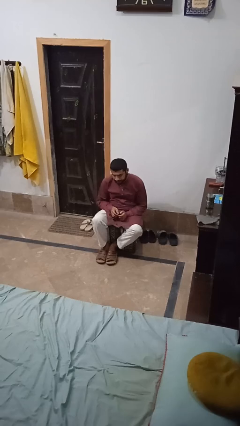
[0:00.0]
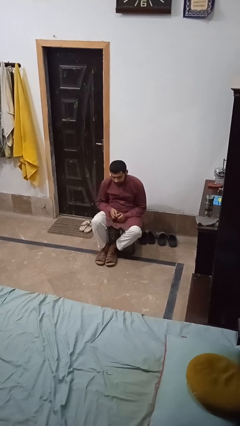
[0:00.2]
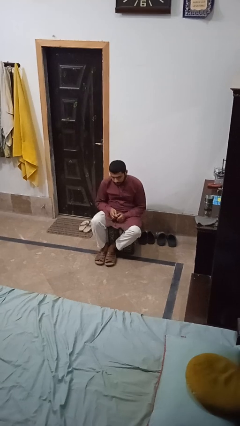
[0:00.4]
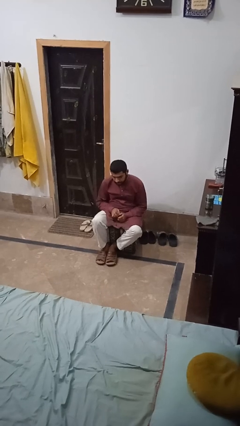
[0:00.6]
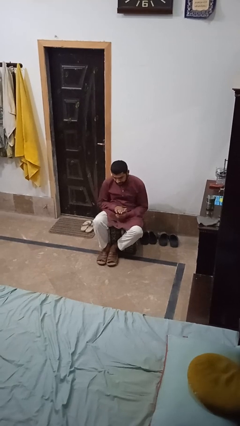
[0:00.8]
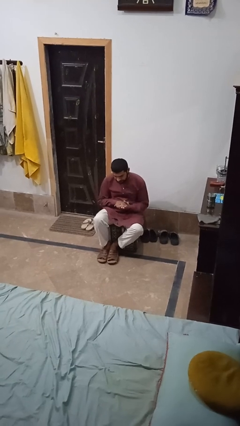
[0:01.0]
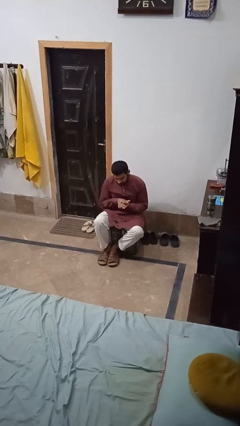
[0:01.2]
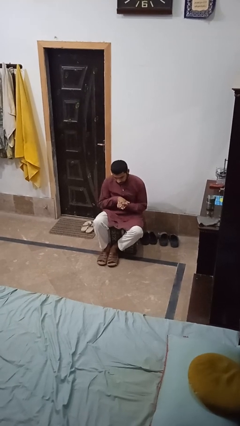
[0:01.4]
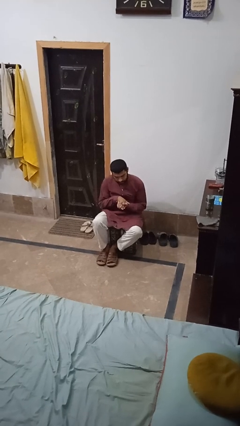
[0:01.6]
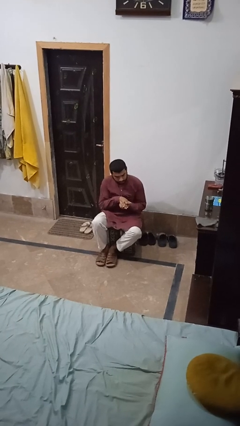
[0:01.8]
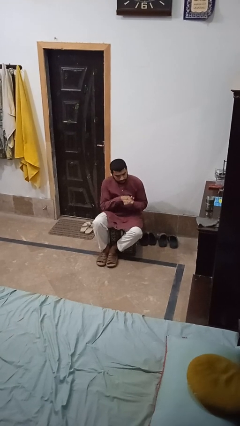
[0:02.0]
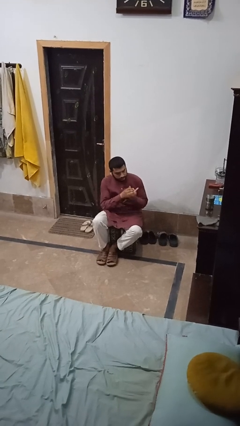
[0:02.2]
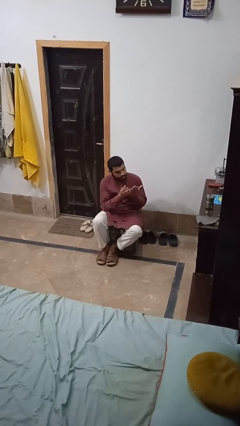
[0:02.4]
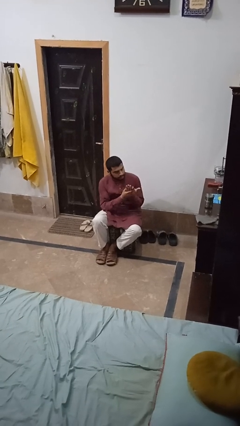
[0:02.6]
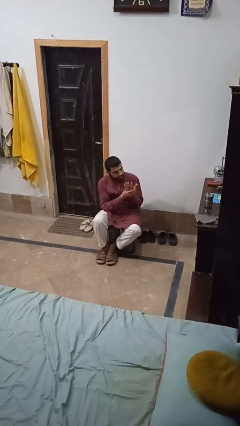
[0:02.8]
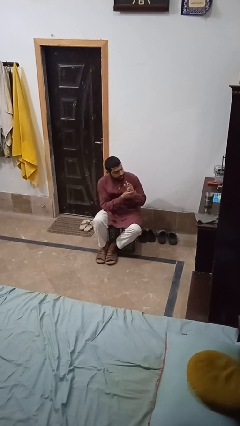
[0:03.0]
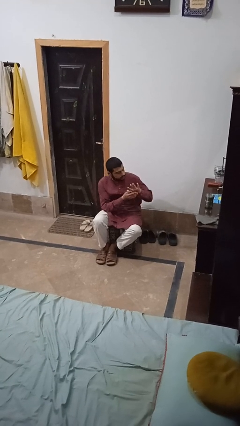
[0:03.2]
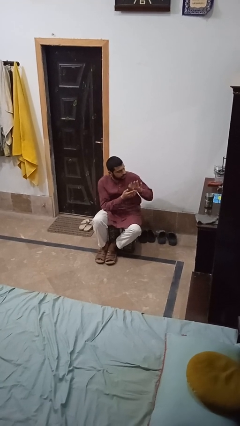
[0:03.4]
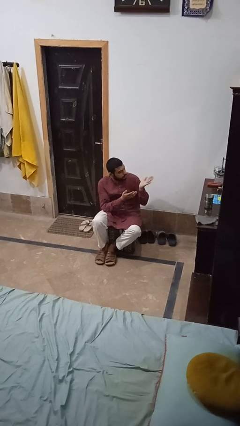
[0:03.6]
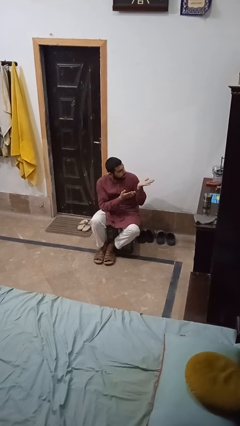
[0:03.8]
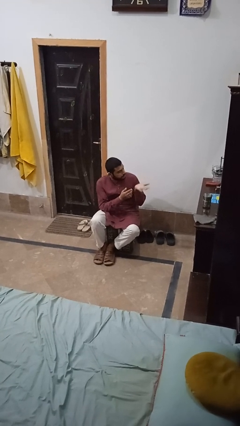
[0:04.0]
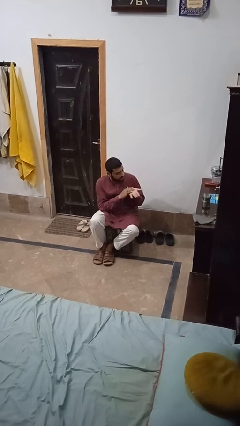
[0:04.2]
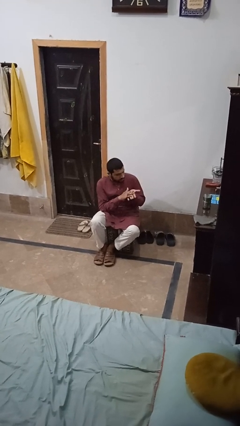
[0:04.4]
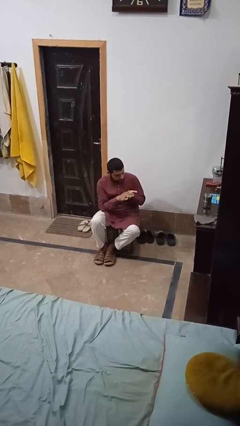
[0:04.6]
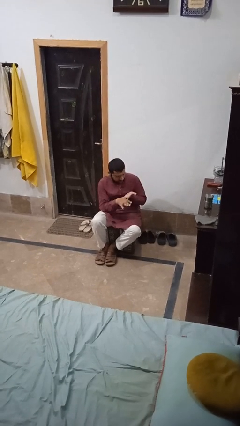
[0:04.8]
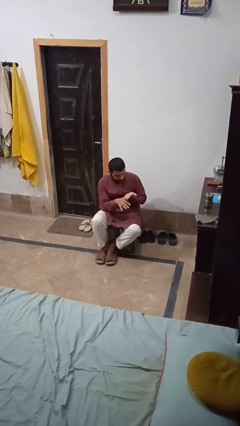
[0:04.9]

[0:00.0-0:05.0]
person looks at hands in lap

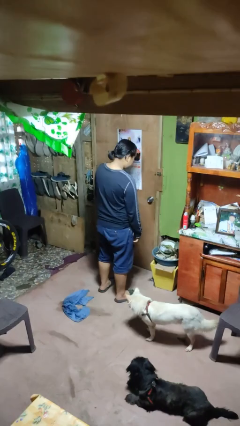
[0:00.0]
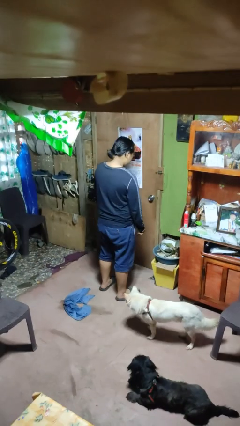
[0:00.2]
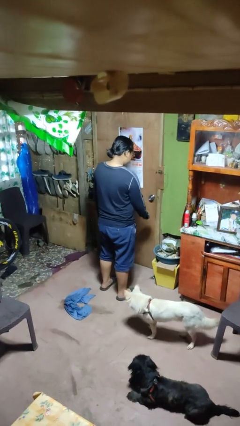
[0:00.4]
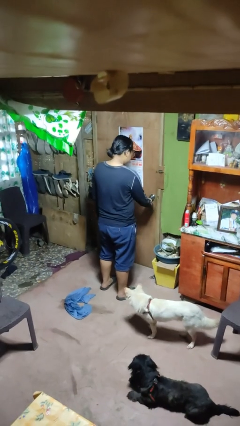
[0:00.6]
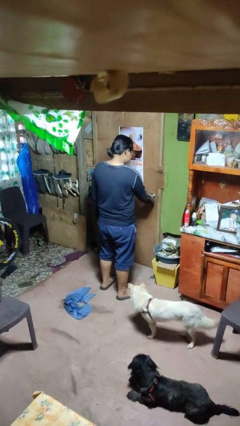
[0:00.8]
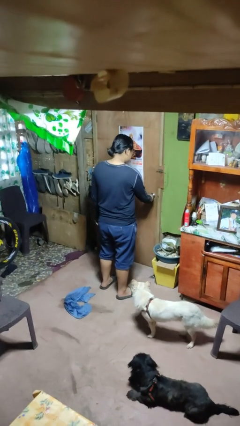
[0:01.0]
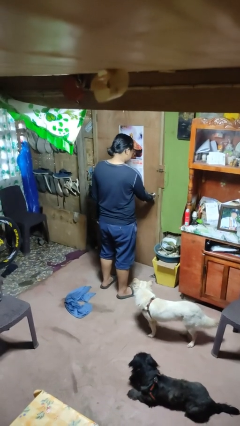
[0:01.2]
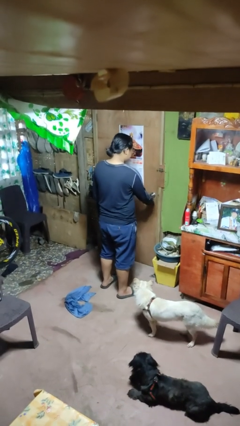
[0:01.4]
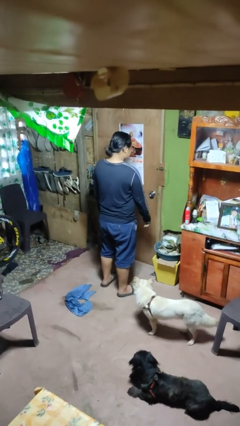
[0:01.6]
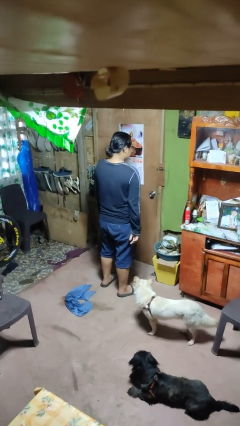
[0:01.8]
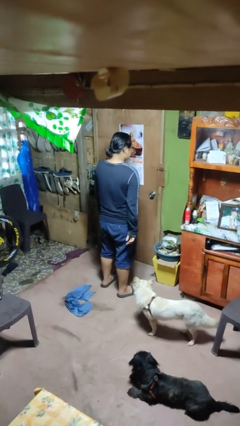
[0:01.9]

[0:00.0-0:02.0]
person unlocks door with keys

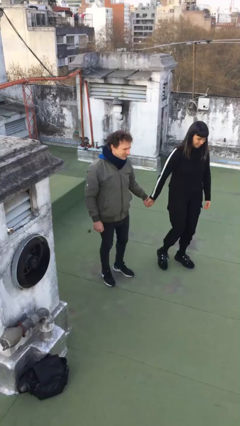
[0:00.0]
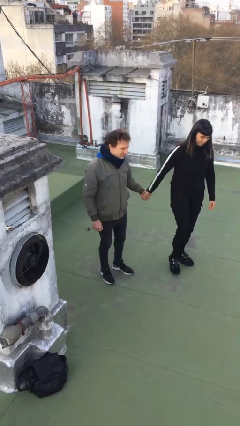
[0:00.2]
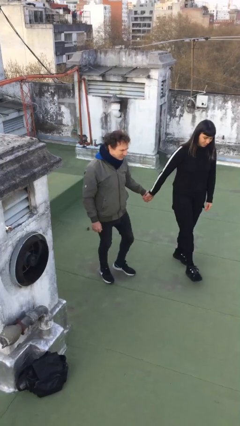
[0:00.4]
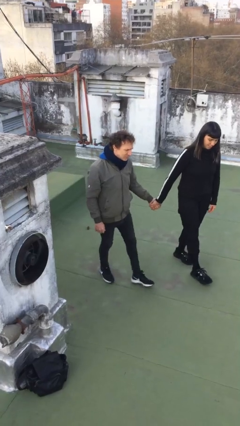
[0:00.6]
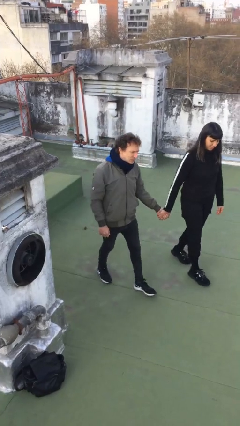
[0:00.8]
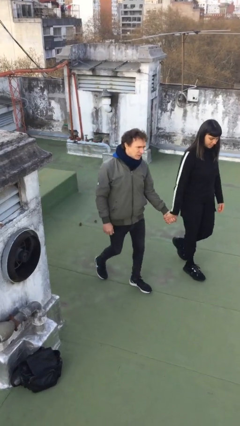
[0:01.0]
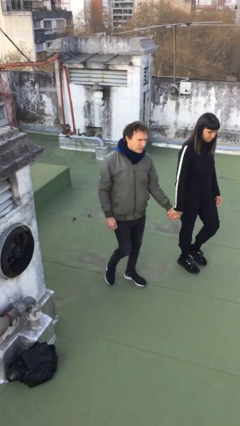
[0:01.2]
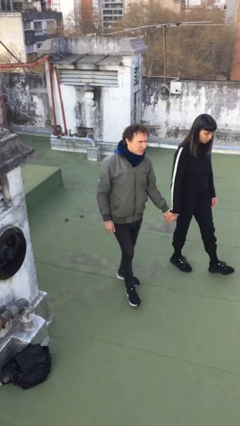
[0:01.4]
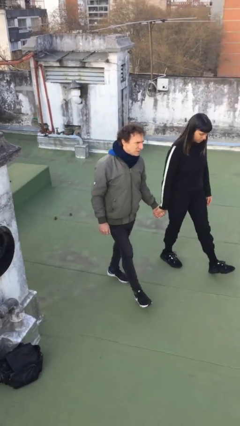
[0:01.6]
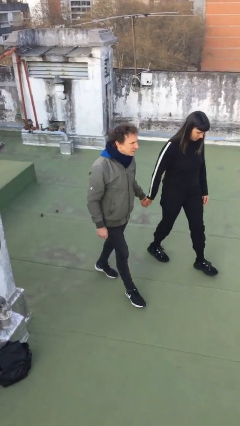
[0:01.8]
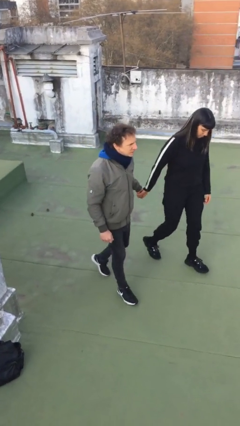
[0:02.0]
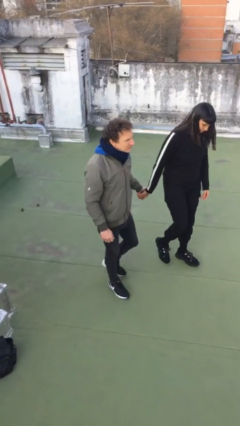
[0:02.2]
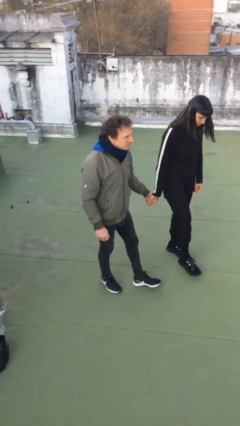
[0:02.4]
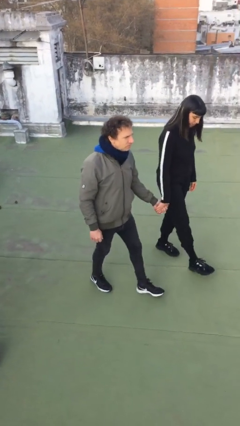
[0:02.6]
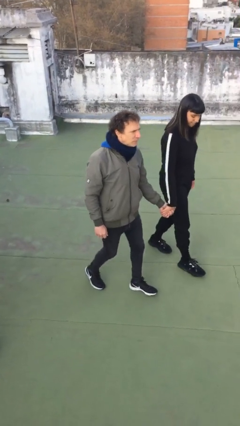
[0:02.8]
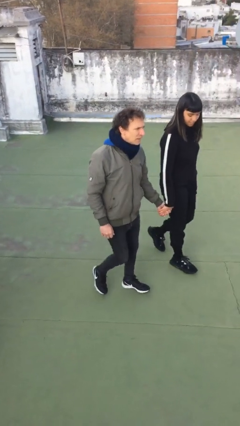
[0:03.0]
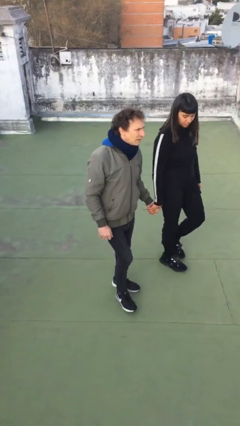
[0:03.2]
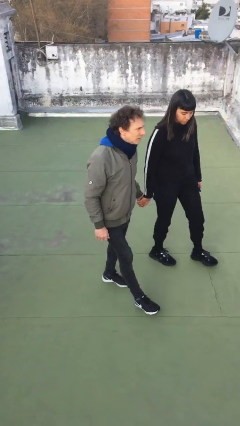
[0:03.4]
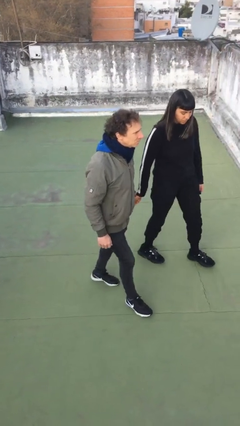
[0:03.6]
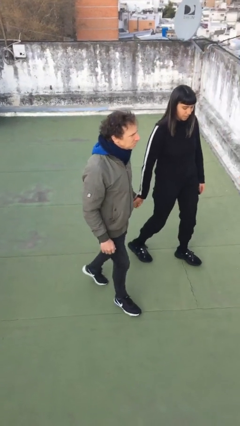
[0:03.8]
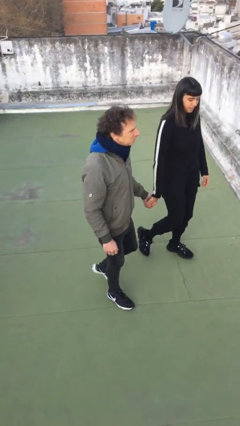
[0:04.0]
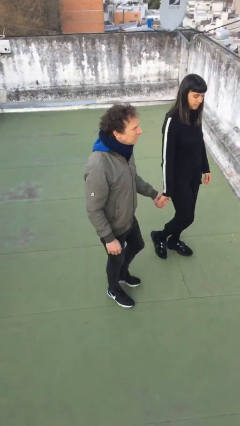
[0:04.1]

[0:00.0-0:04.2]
person holds hand

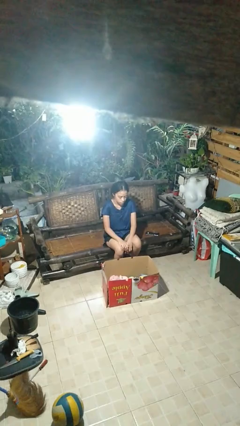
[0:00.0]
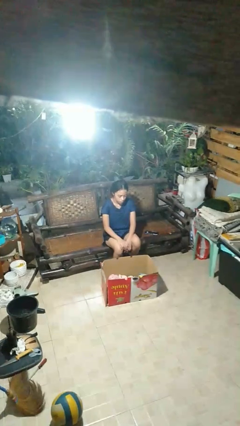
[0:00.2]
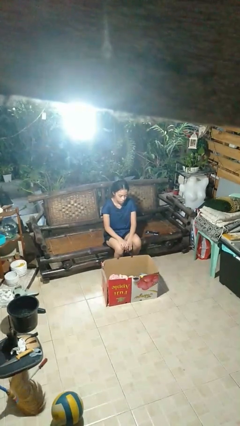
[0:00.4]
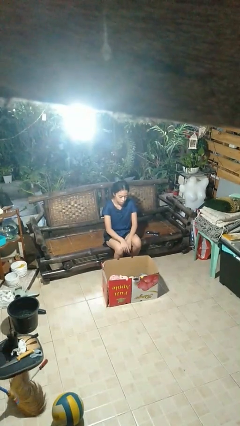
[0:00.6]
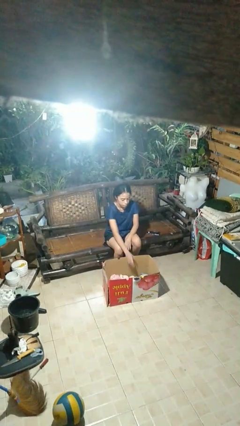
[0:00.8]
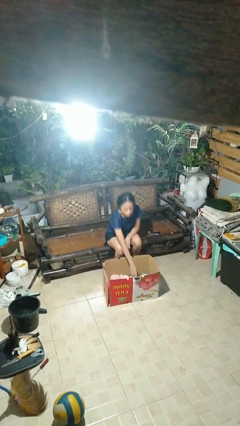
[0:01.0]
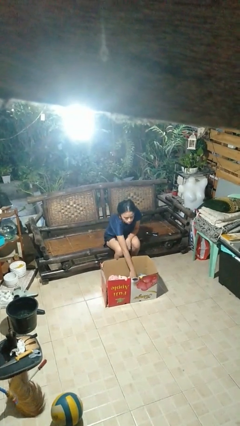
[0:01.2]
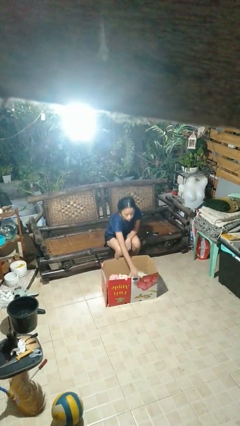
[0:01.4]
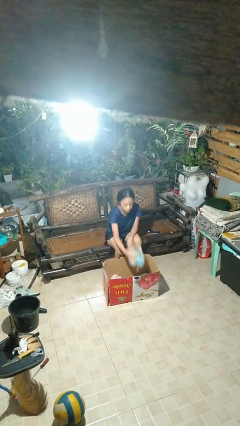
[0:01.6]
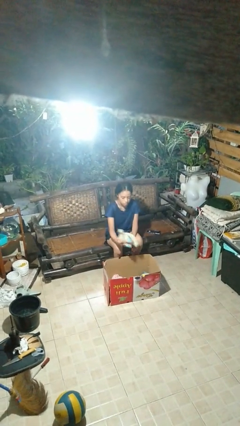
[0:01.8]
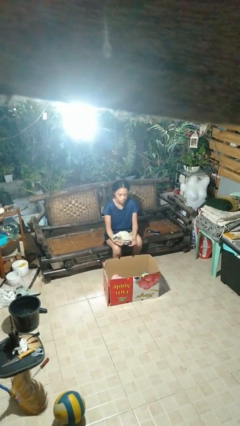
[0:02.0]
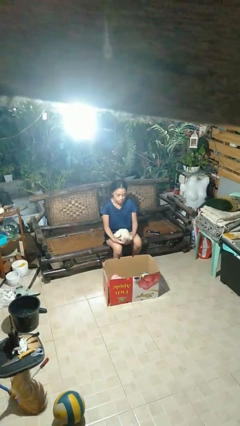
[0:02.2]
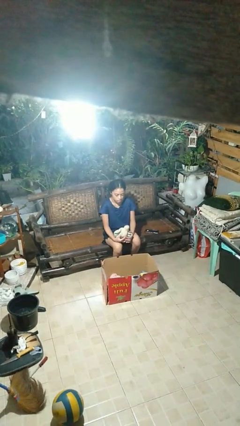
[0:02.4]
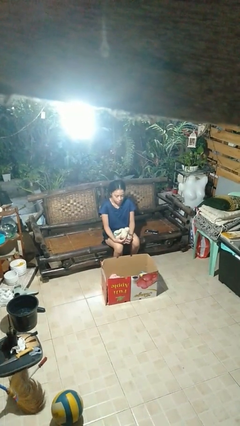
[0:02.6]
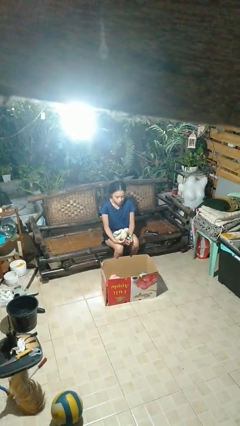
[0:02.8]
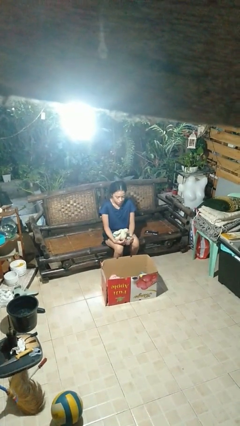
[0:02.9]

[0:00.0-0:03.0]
person takes object from box

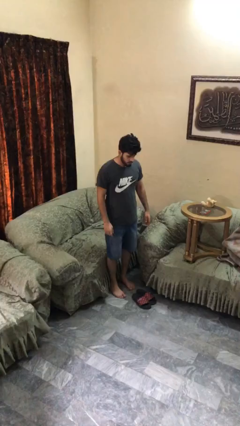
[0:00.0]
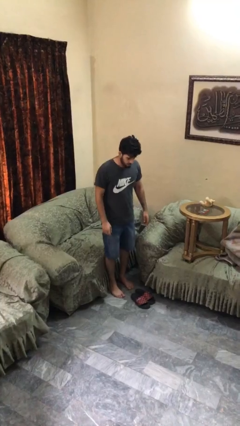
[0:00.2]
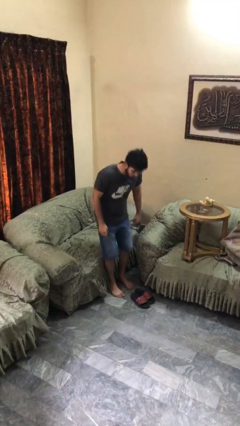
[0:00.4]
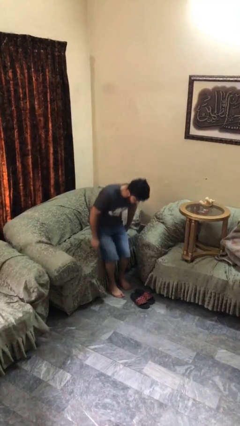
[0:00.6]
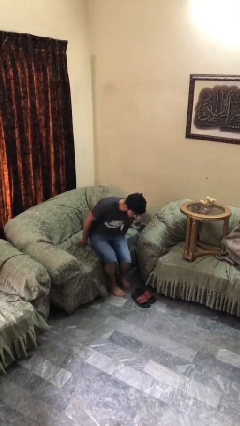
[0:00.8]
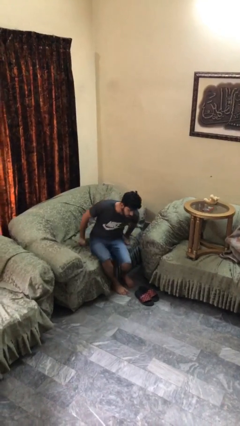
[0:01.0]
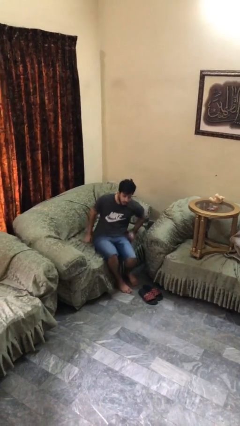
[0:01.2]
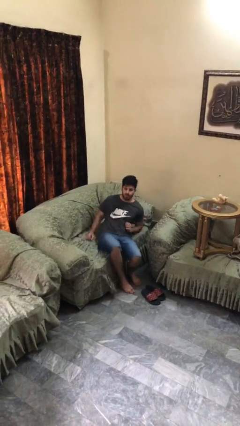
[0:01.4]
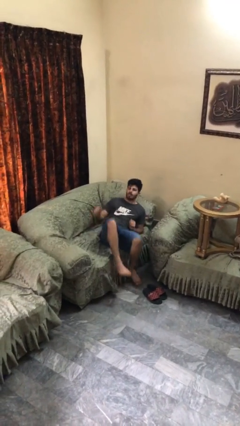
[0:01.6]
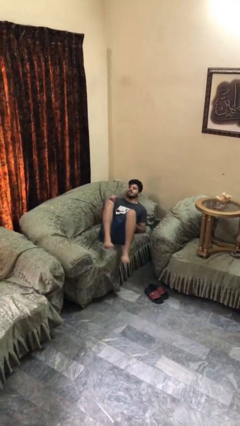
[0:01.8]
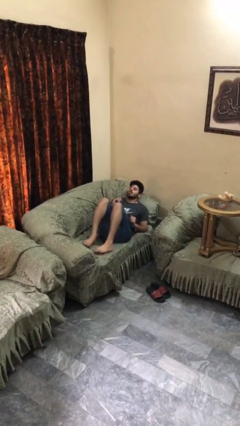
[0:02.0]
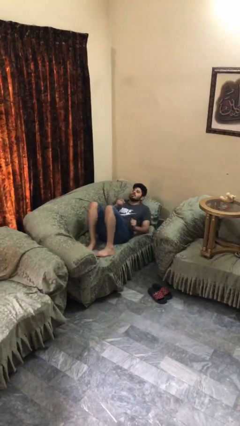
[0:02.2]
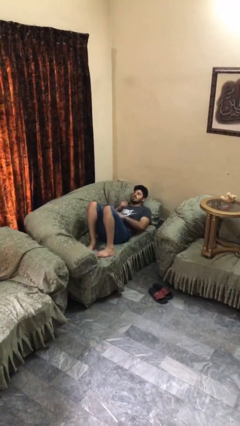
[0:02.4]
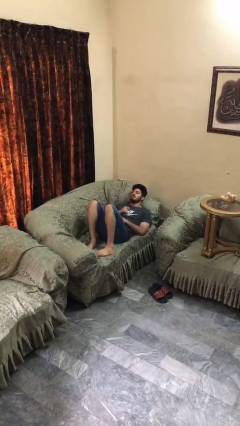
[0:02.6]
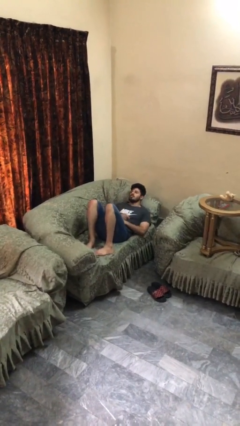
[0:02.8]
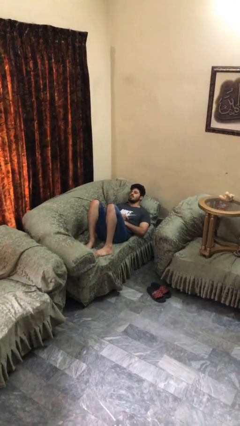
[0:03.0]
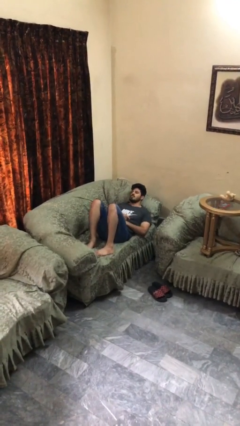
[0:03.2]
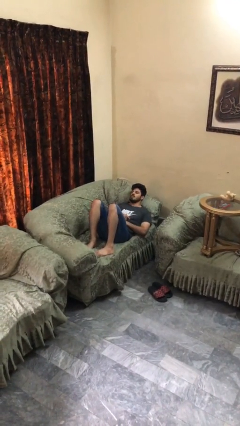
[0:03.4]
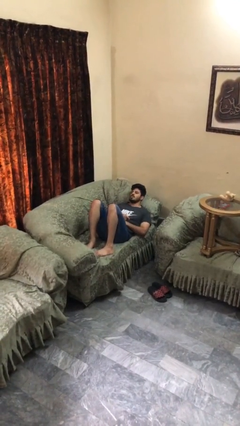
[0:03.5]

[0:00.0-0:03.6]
person lies down on couch
